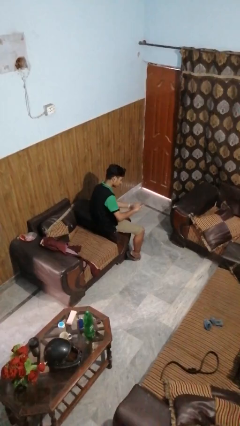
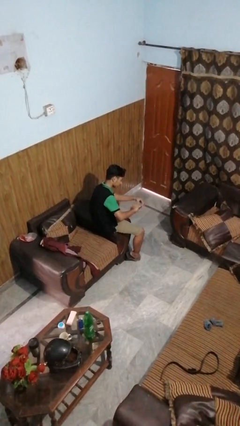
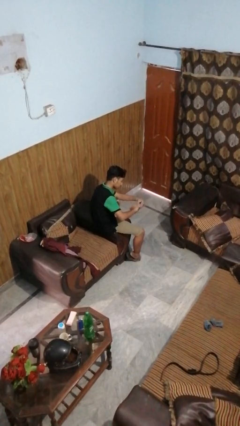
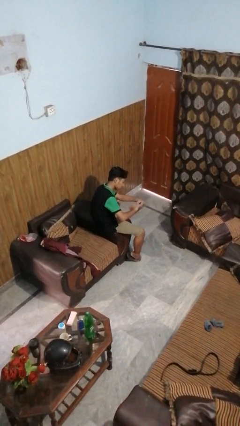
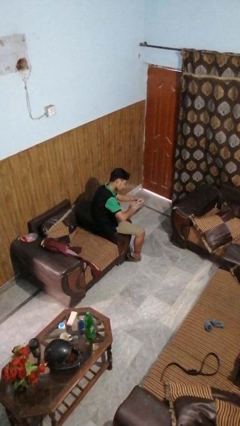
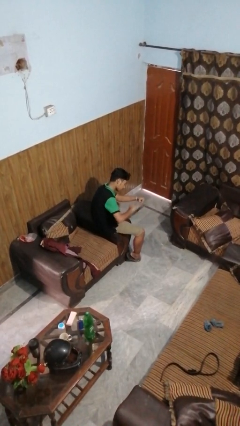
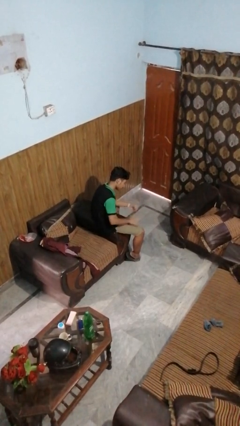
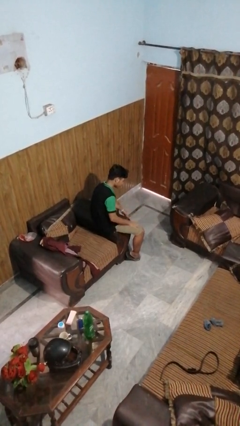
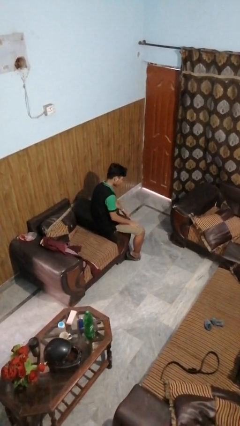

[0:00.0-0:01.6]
person takes off ring

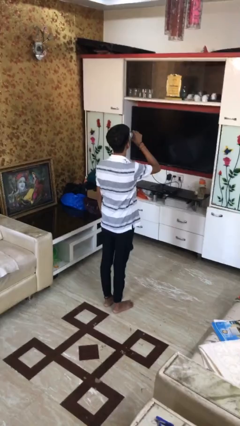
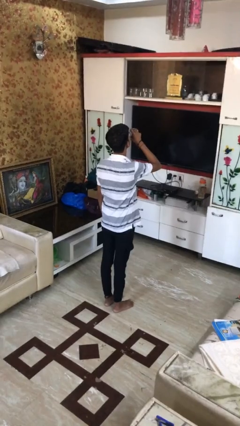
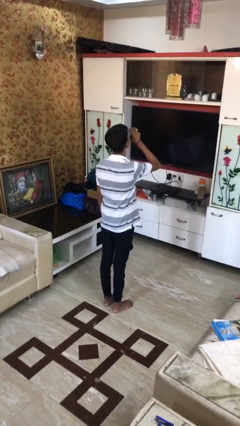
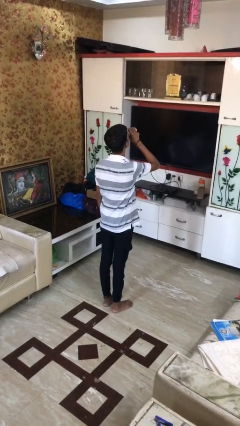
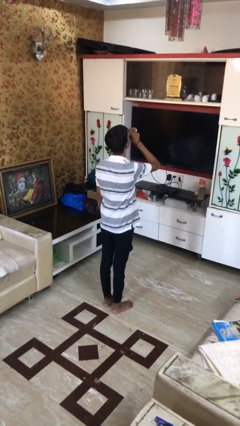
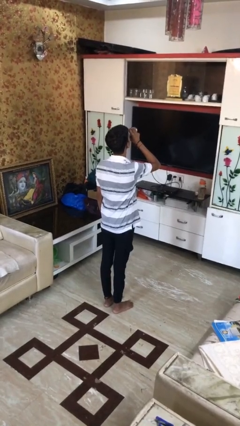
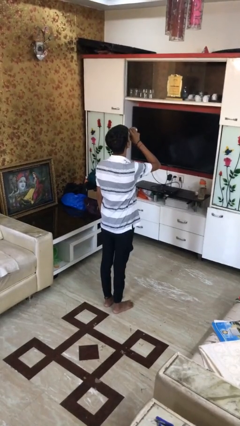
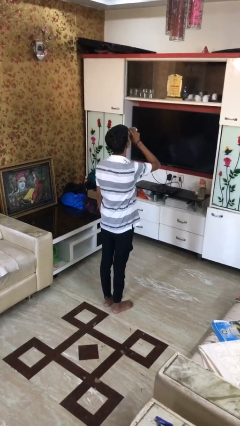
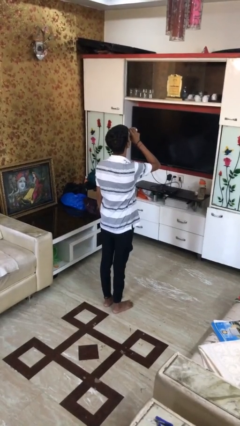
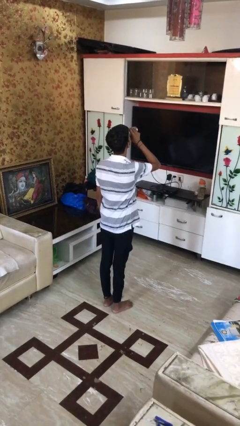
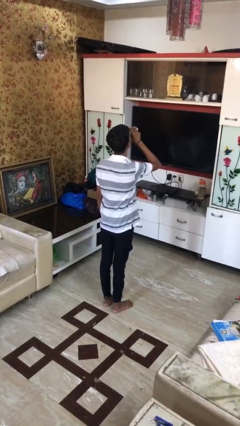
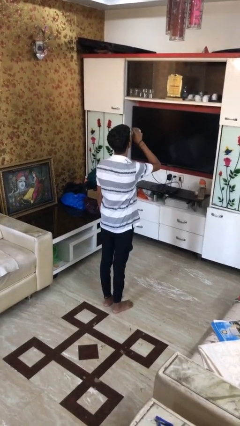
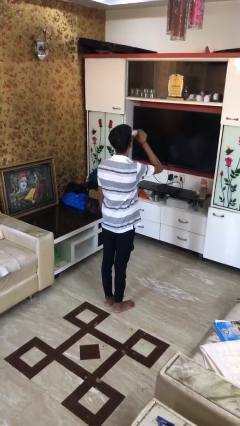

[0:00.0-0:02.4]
person drinks from beverage can

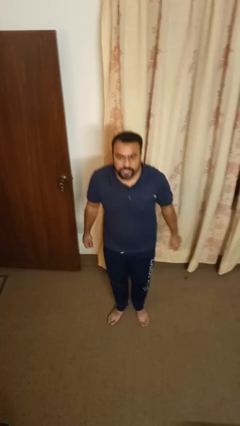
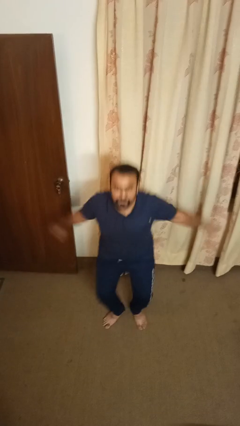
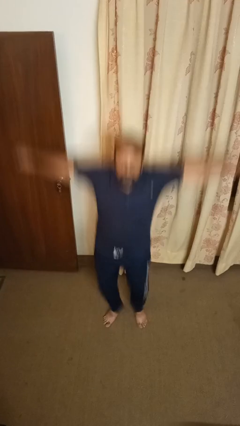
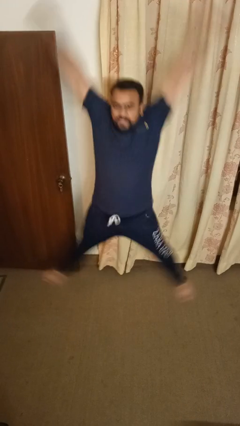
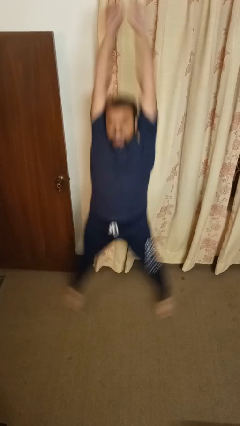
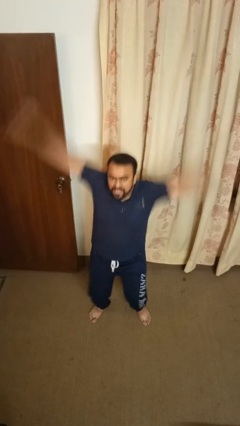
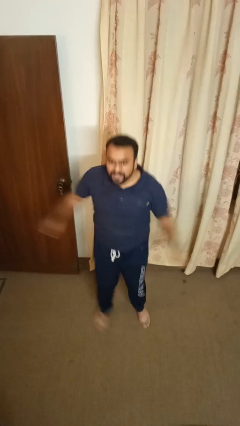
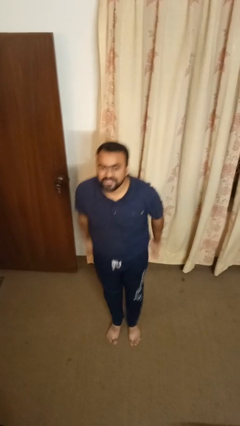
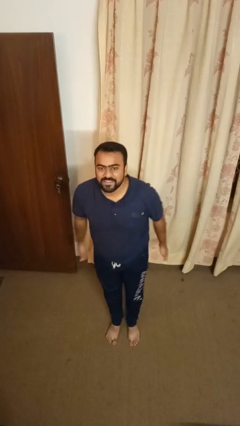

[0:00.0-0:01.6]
person exercises with jumping jacks

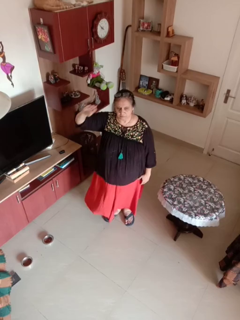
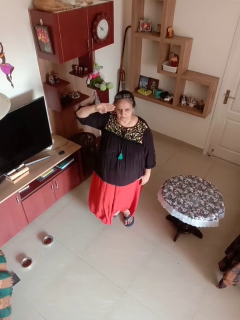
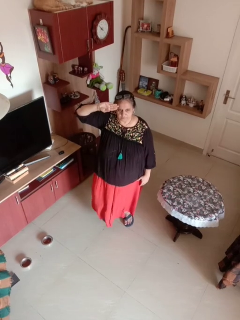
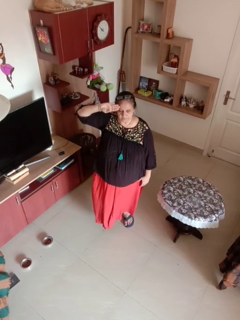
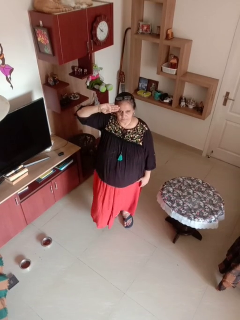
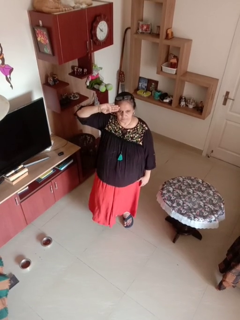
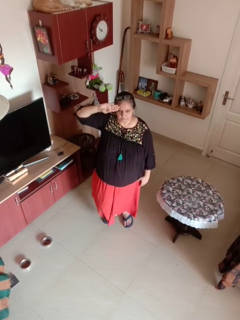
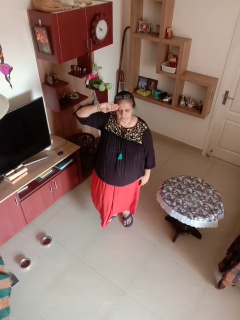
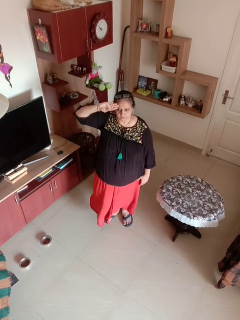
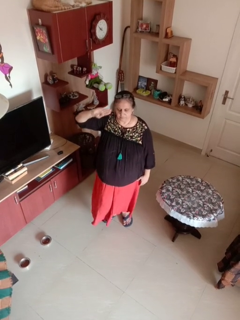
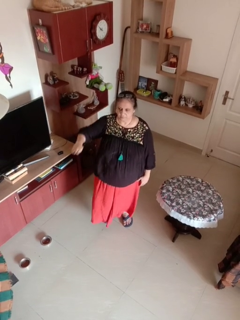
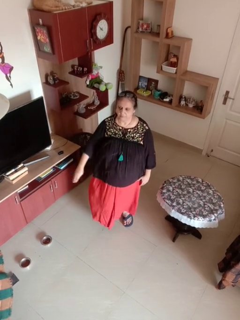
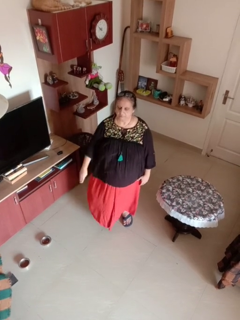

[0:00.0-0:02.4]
person salutes

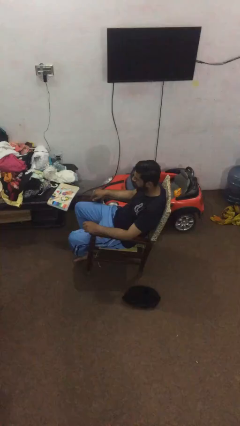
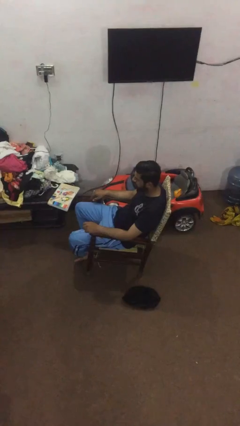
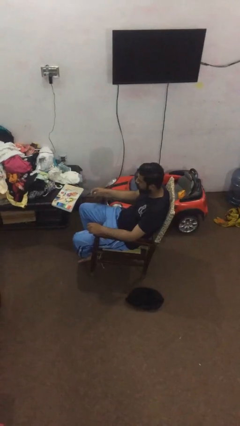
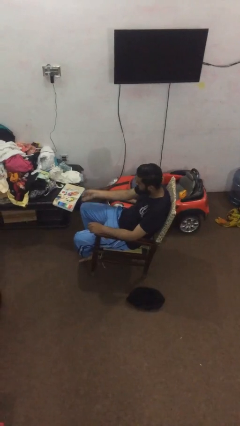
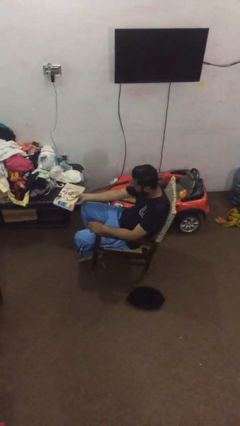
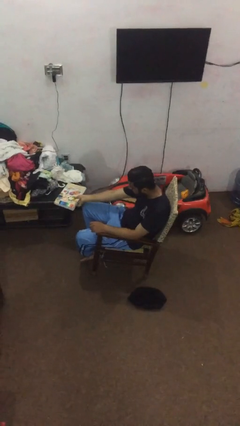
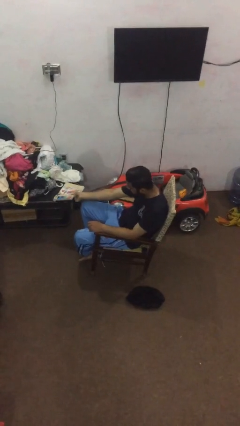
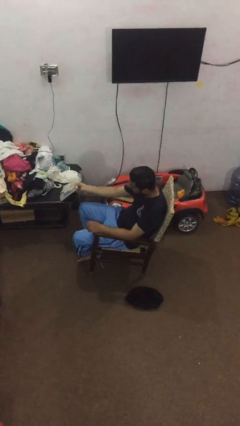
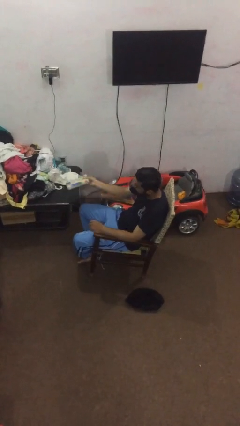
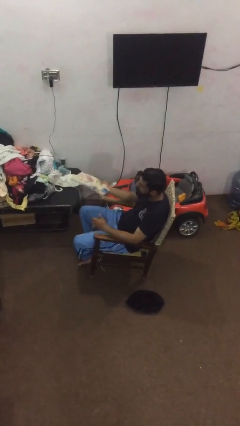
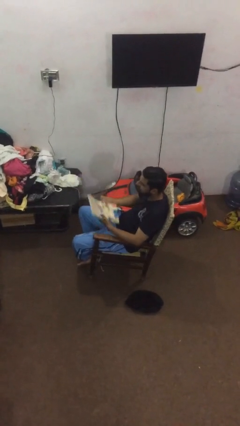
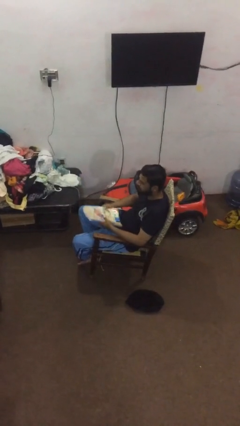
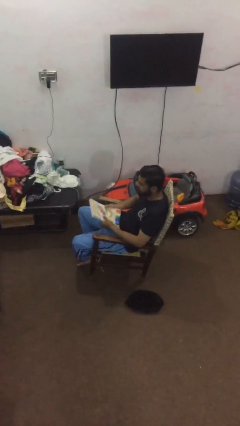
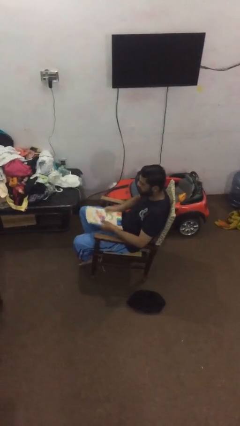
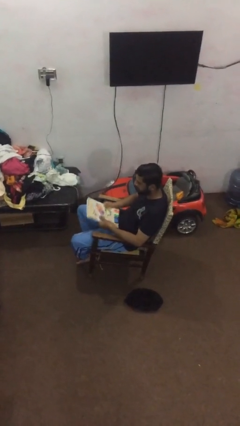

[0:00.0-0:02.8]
person picks up object from table

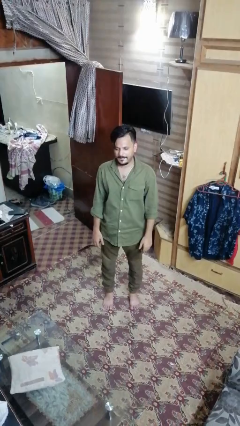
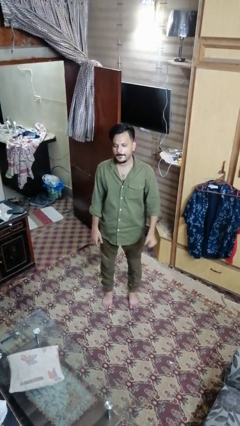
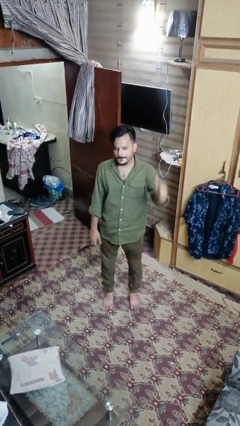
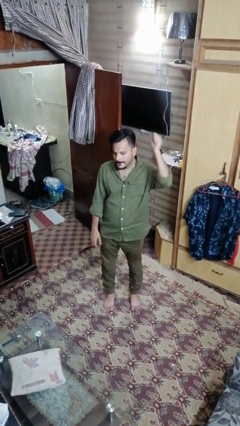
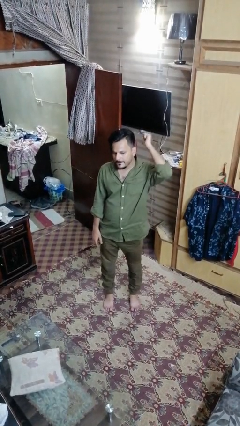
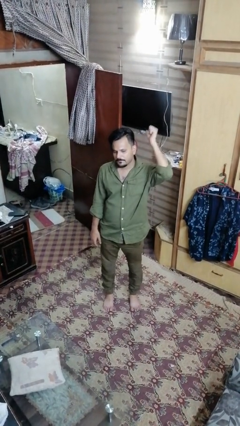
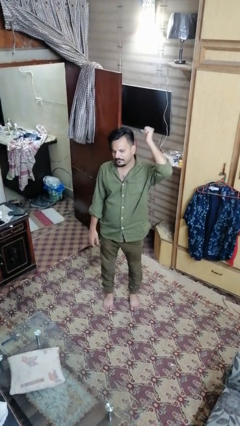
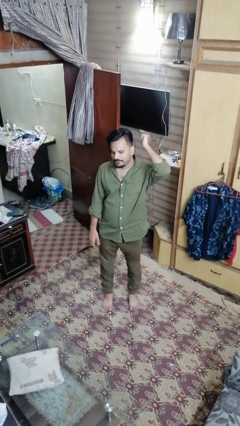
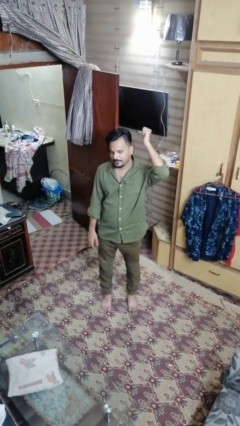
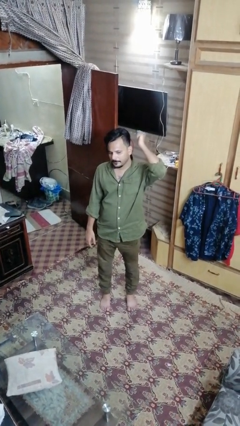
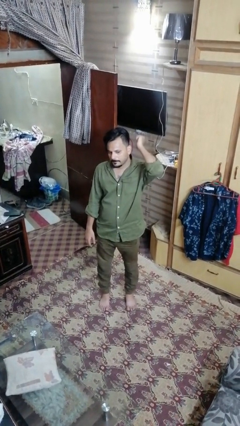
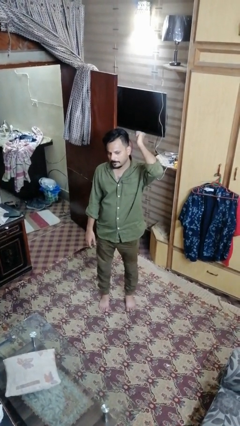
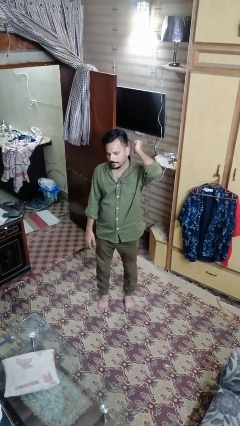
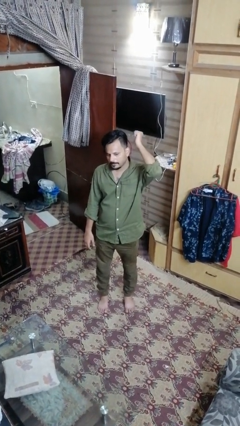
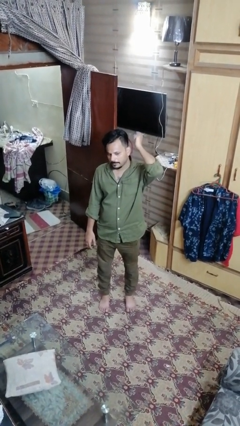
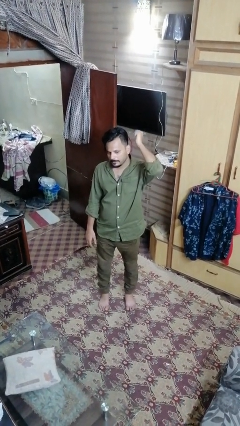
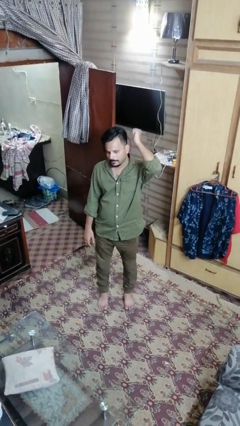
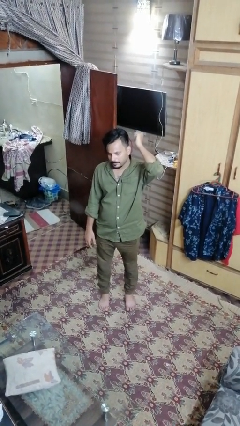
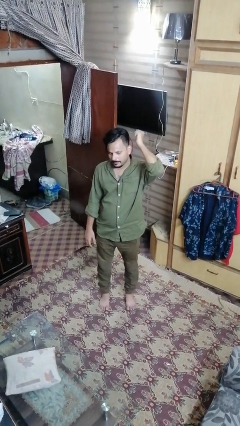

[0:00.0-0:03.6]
person gestures behind me

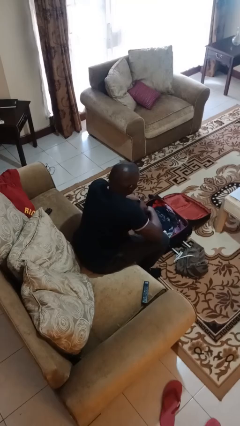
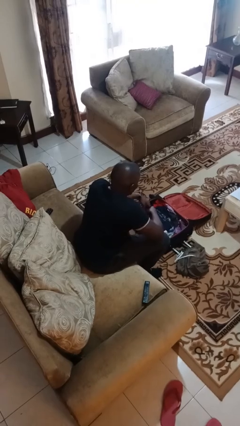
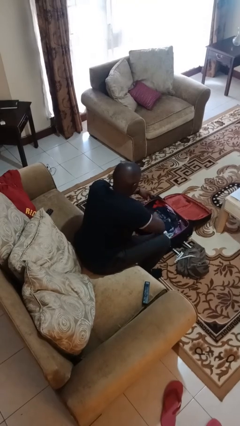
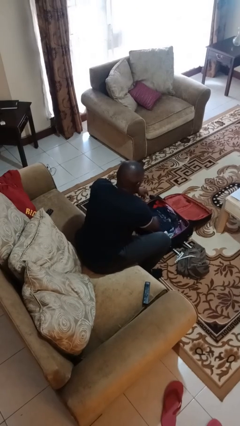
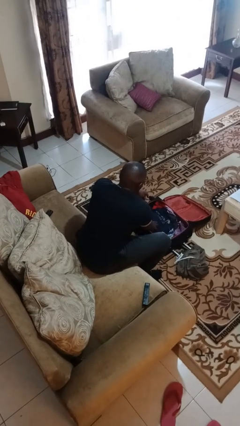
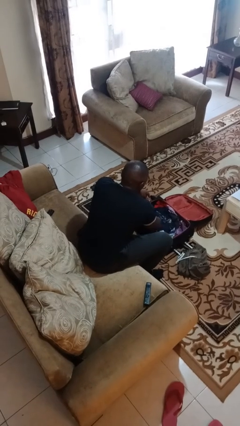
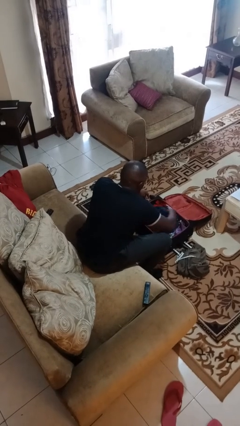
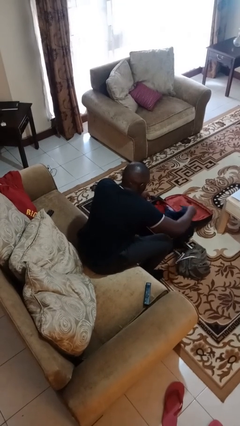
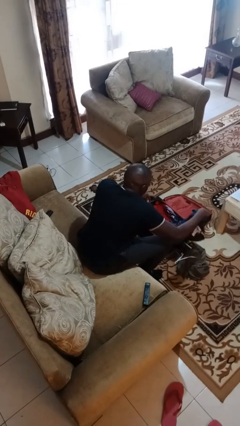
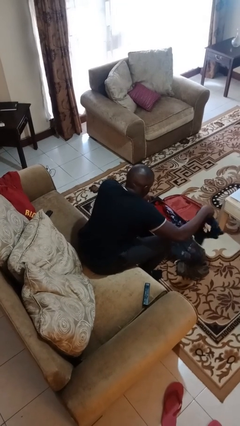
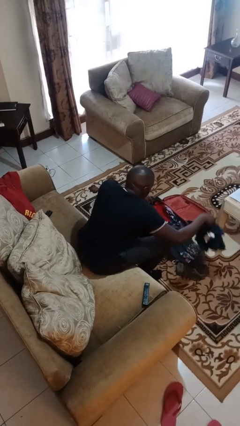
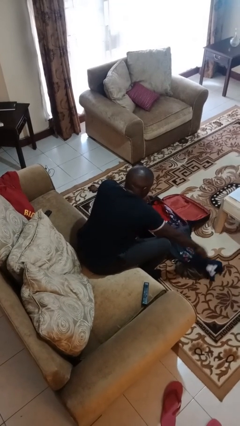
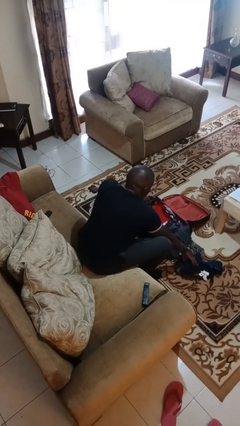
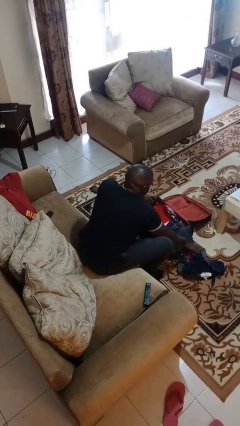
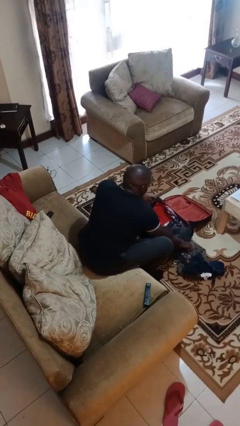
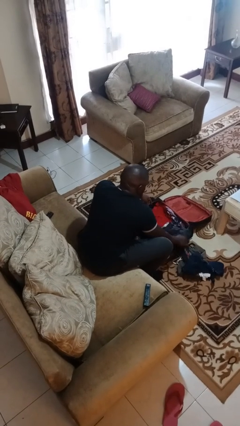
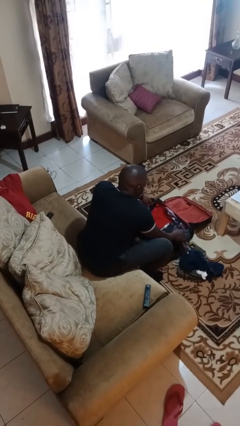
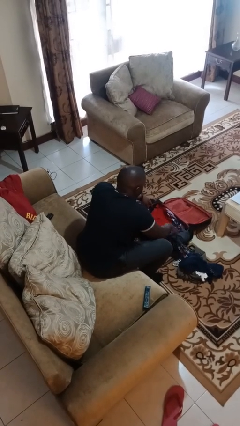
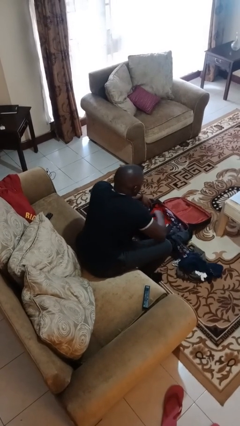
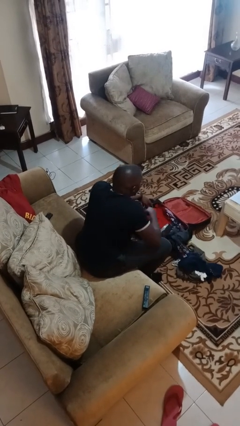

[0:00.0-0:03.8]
person unloads clothes from suitcase
